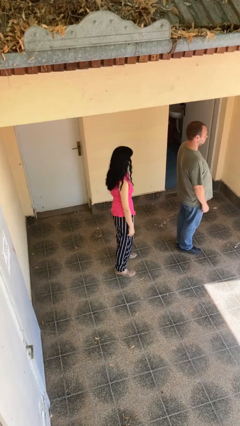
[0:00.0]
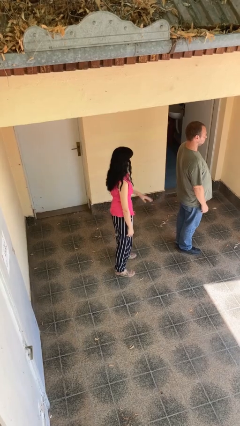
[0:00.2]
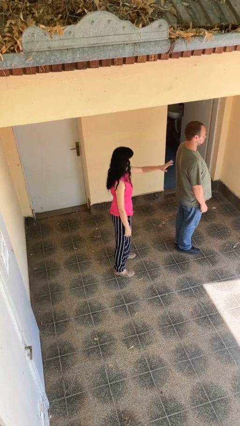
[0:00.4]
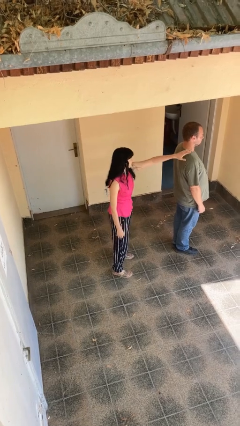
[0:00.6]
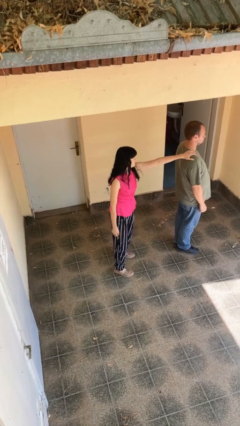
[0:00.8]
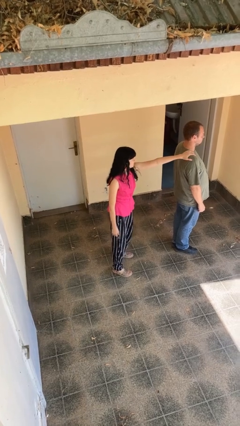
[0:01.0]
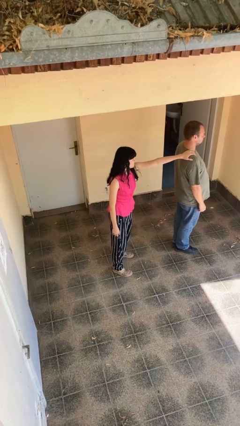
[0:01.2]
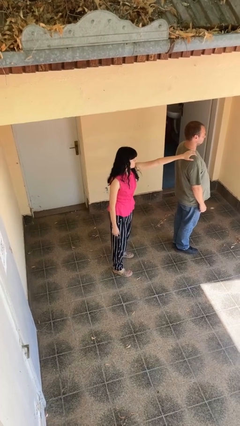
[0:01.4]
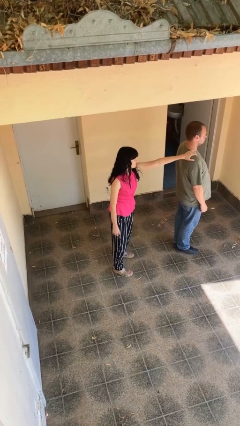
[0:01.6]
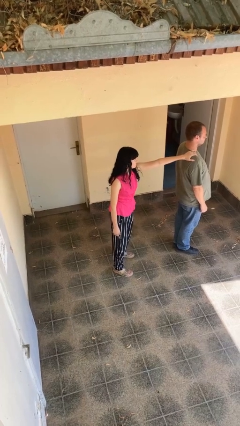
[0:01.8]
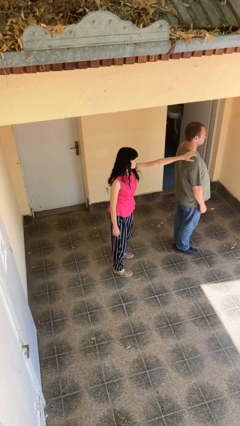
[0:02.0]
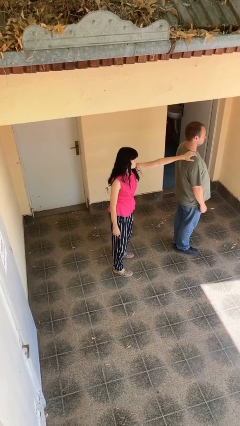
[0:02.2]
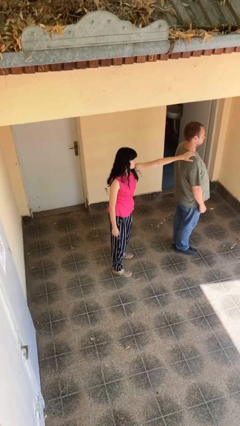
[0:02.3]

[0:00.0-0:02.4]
person grabs person by shoulder

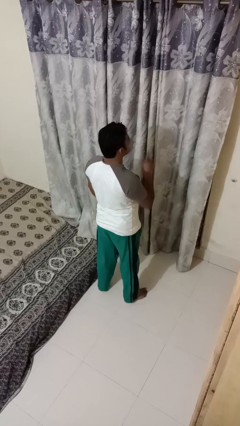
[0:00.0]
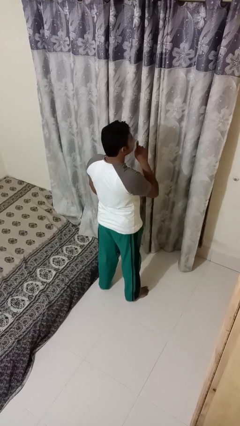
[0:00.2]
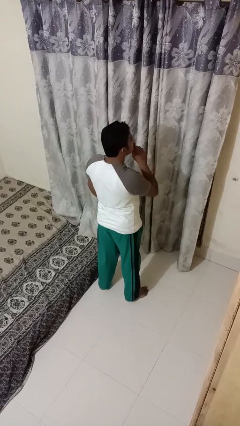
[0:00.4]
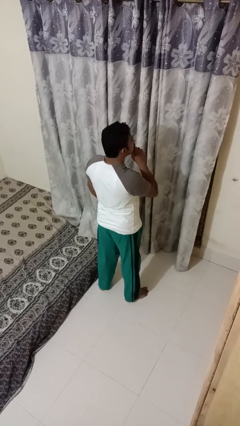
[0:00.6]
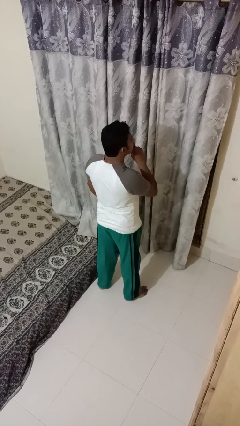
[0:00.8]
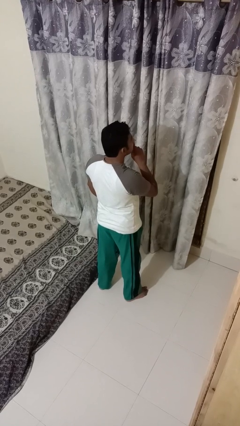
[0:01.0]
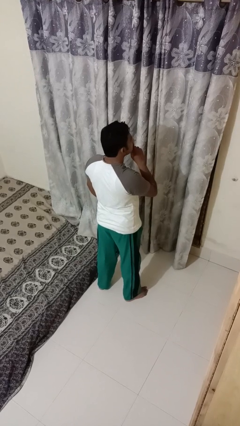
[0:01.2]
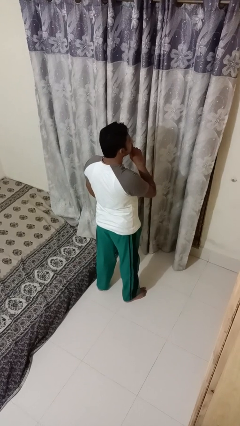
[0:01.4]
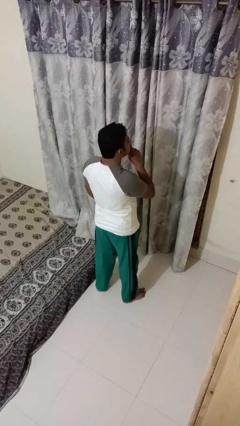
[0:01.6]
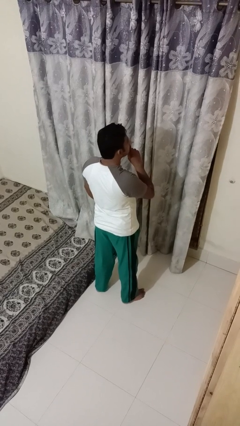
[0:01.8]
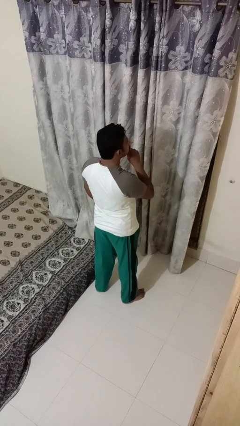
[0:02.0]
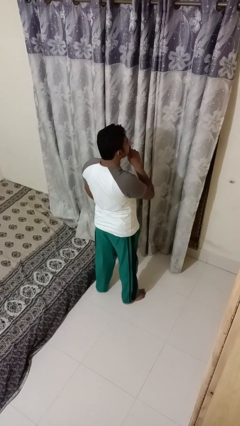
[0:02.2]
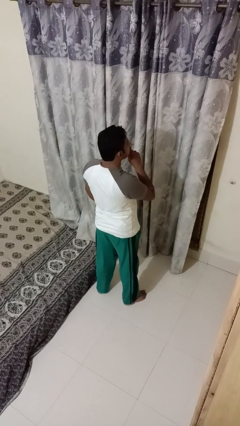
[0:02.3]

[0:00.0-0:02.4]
person gestures be quiet

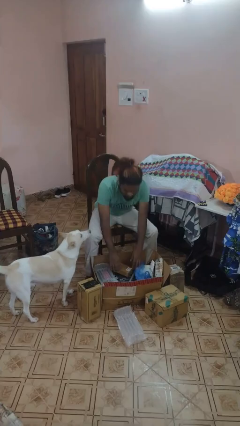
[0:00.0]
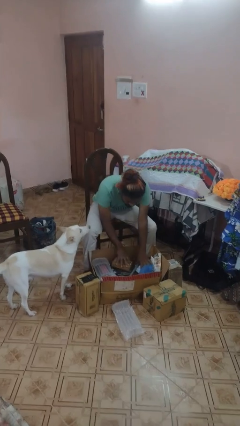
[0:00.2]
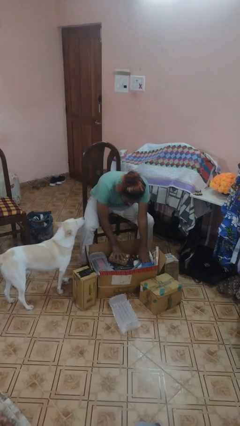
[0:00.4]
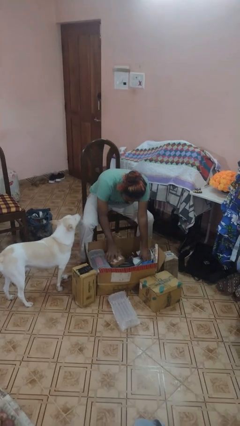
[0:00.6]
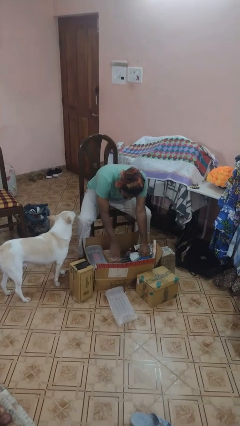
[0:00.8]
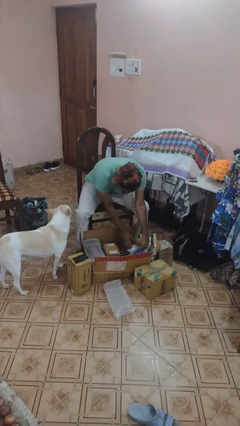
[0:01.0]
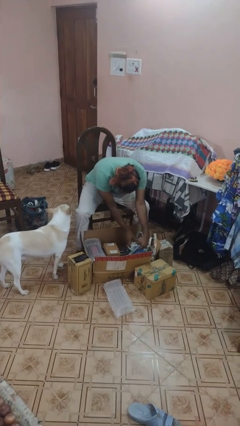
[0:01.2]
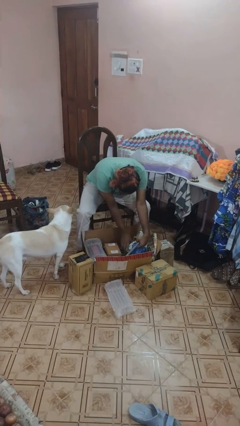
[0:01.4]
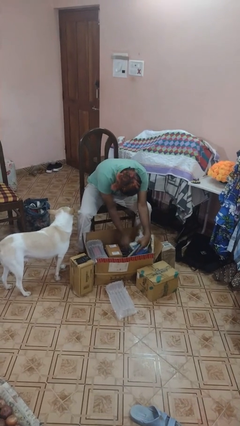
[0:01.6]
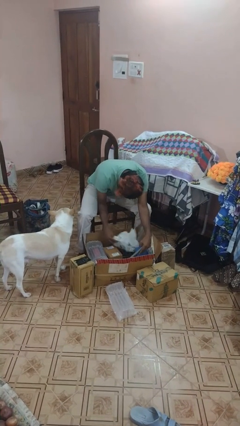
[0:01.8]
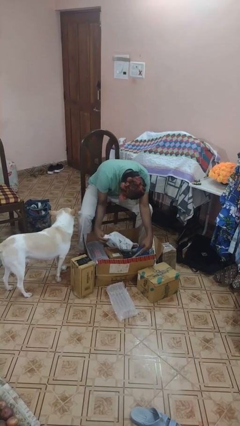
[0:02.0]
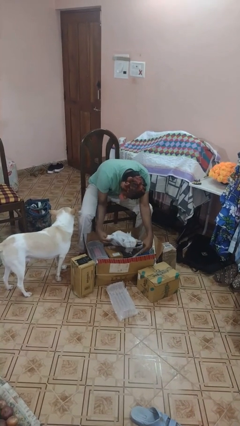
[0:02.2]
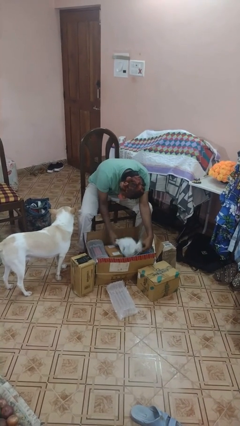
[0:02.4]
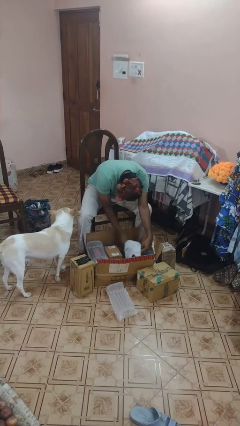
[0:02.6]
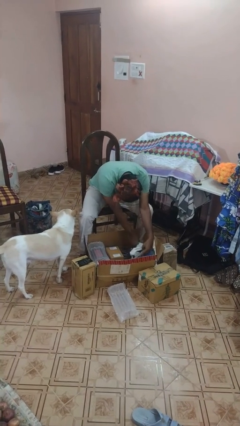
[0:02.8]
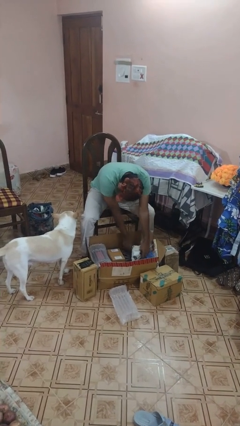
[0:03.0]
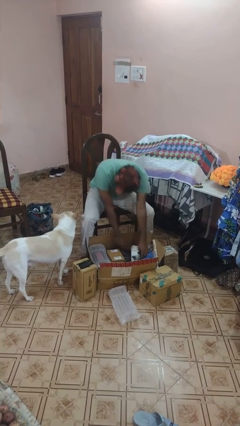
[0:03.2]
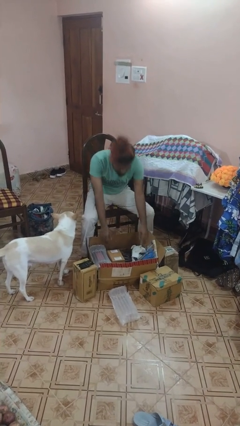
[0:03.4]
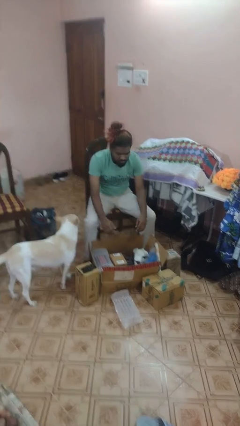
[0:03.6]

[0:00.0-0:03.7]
person searches in box

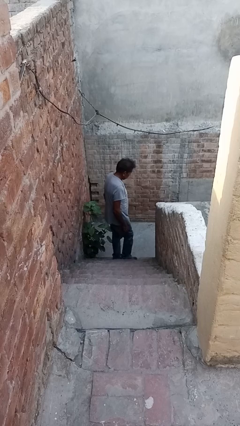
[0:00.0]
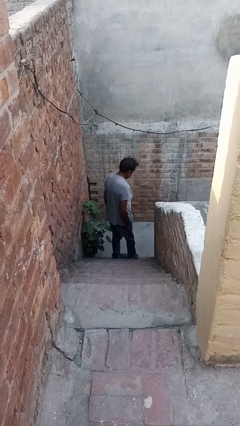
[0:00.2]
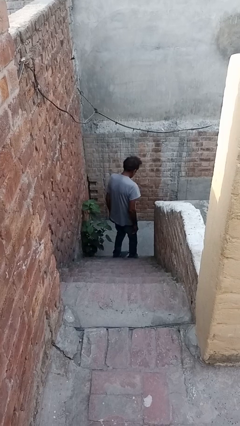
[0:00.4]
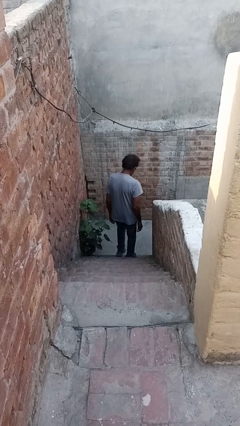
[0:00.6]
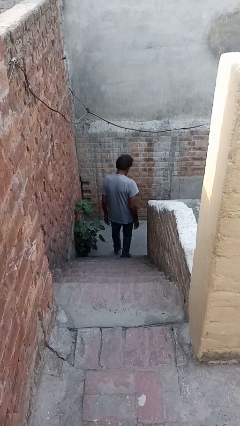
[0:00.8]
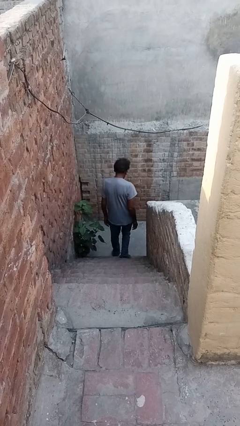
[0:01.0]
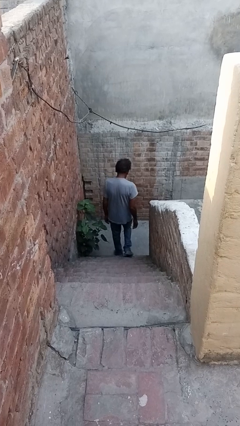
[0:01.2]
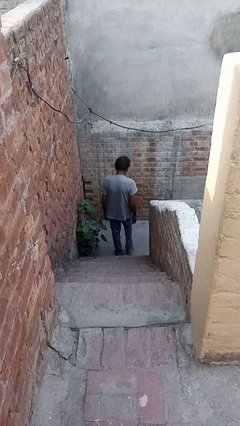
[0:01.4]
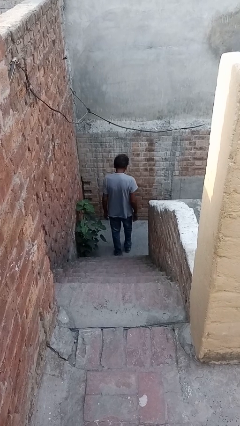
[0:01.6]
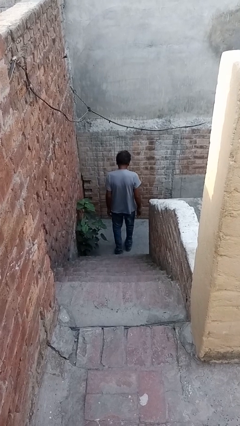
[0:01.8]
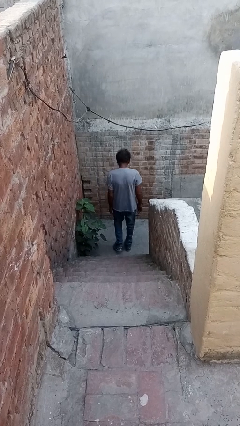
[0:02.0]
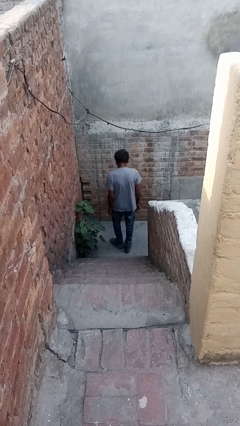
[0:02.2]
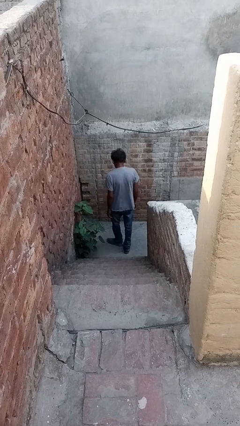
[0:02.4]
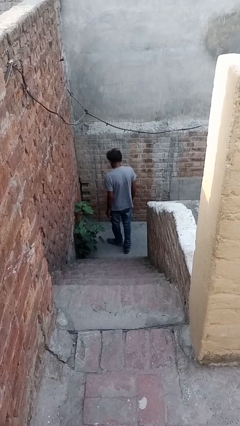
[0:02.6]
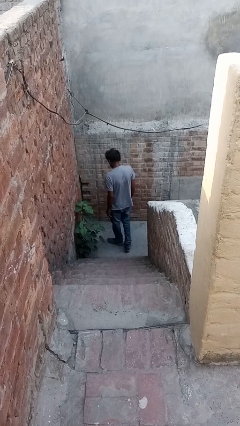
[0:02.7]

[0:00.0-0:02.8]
person climbs down stairs

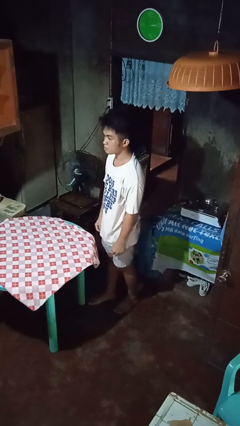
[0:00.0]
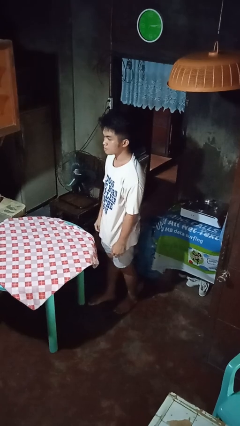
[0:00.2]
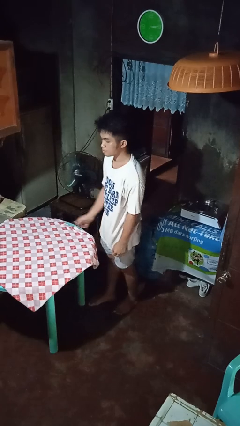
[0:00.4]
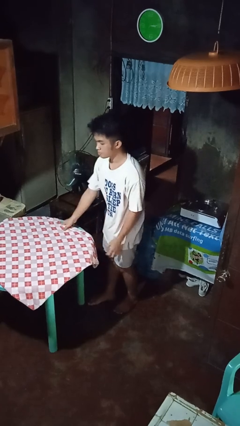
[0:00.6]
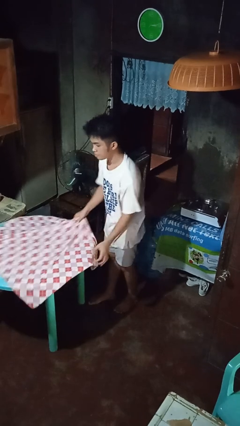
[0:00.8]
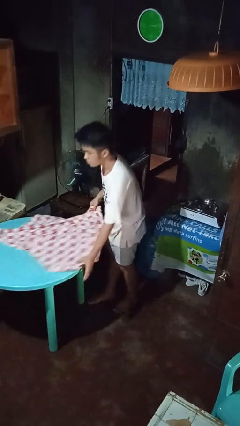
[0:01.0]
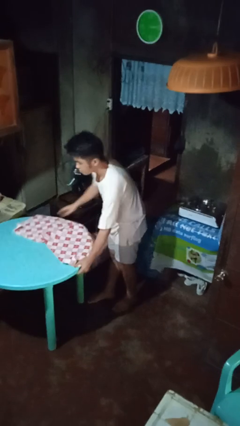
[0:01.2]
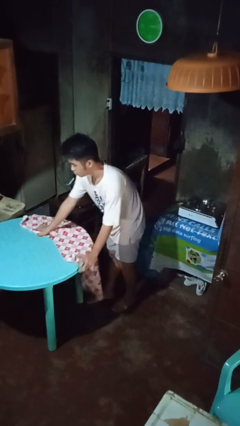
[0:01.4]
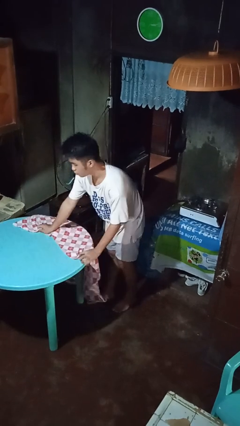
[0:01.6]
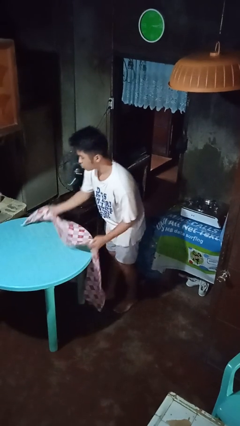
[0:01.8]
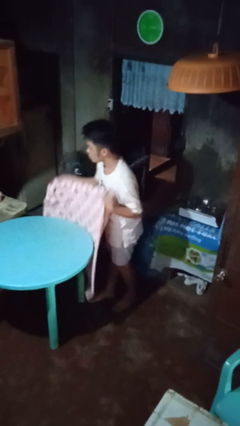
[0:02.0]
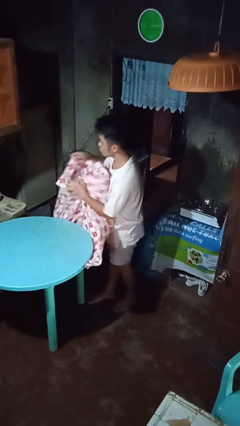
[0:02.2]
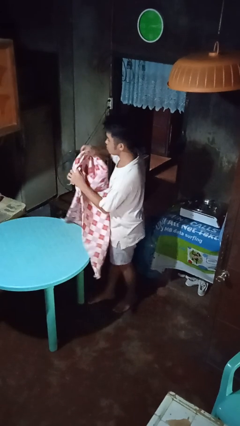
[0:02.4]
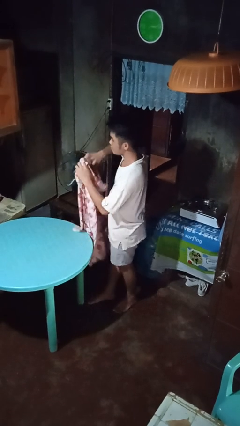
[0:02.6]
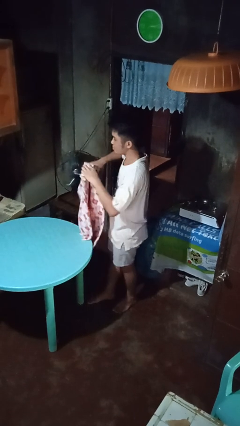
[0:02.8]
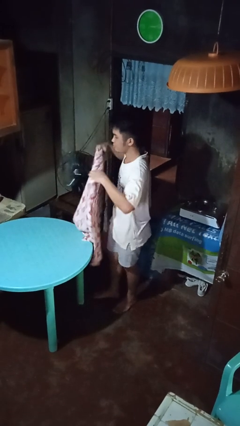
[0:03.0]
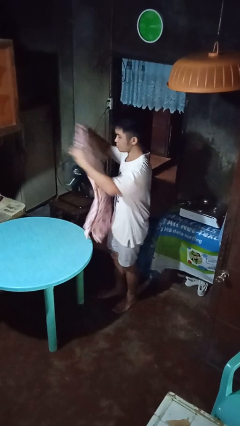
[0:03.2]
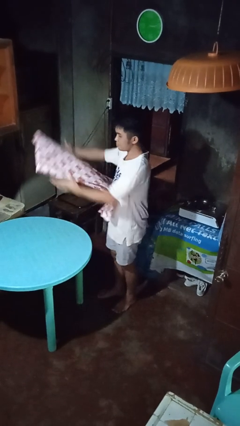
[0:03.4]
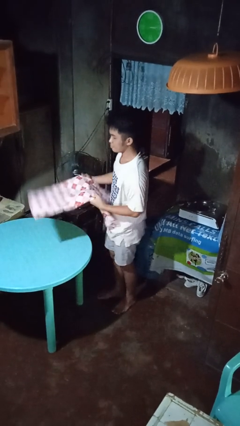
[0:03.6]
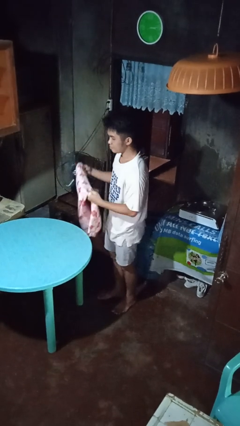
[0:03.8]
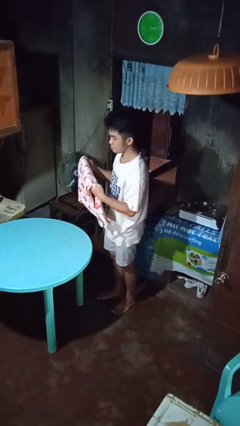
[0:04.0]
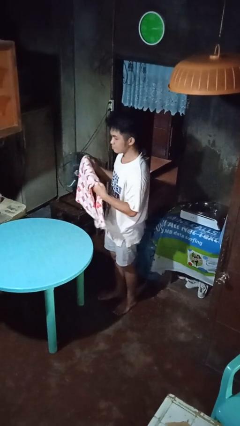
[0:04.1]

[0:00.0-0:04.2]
person folds tablecloth

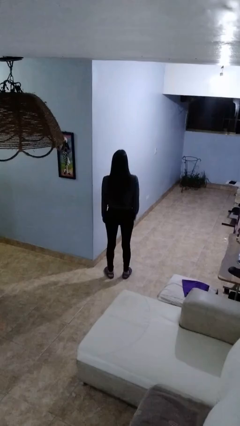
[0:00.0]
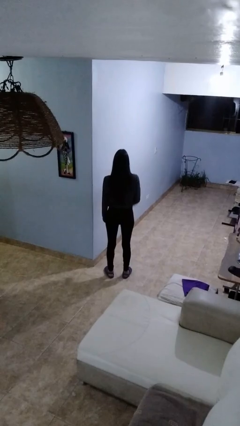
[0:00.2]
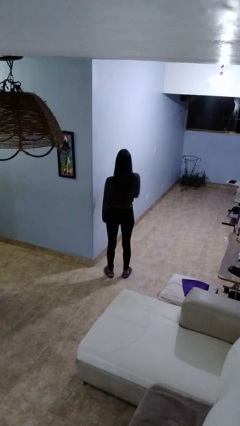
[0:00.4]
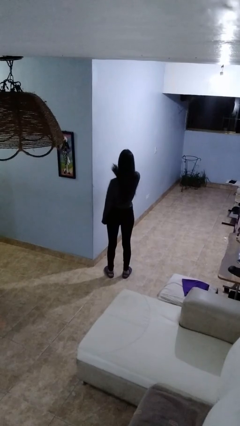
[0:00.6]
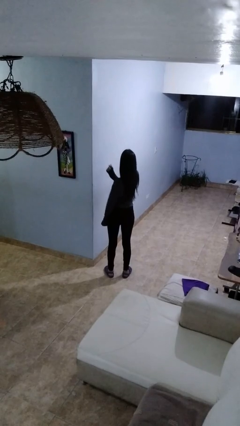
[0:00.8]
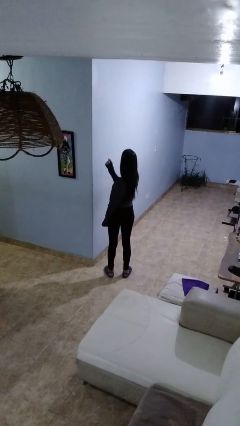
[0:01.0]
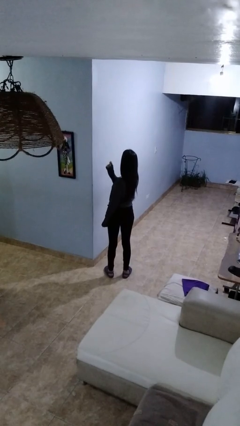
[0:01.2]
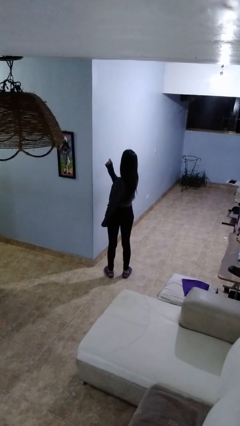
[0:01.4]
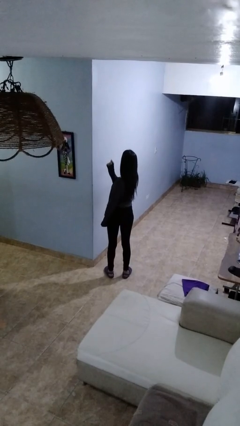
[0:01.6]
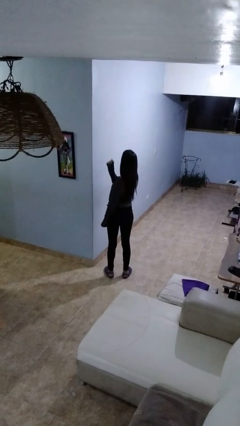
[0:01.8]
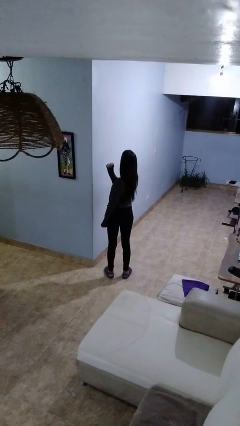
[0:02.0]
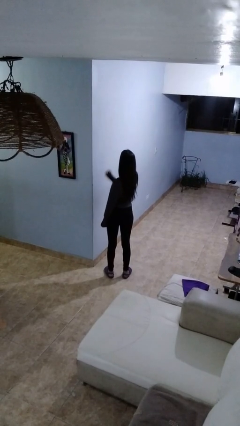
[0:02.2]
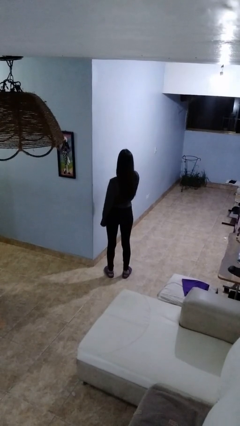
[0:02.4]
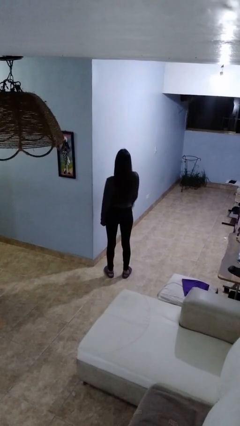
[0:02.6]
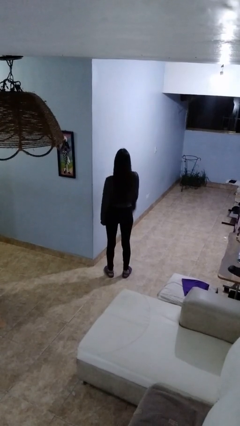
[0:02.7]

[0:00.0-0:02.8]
person gestures behind me
